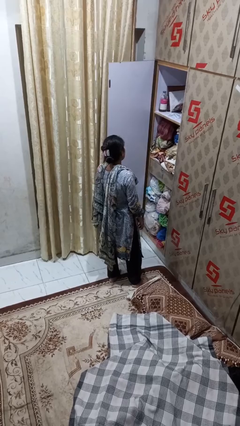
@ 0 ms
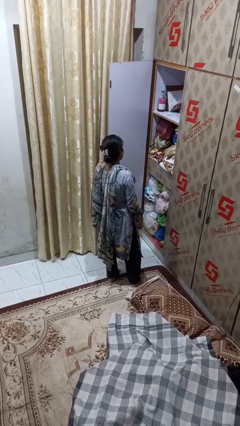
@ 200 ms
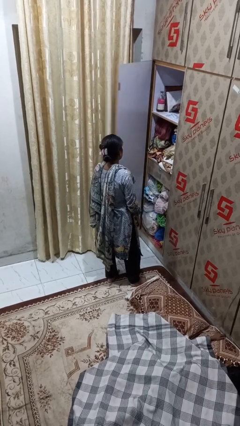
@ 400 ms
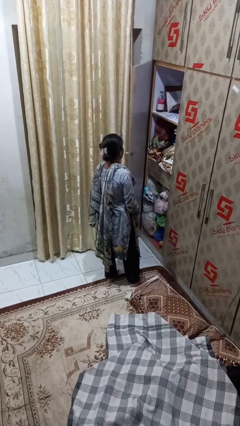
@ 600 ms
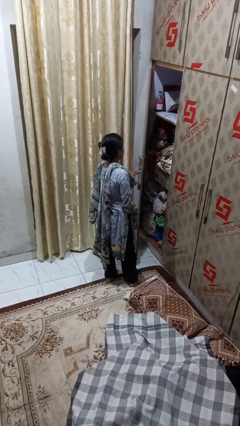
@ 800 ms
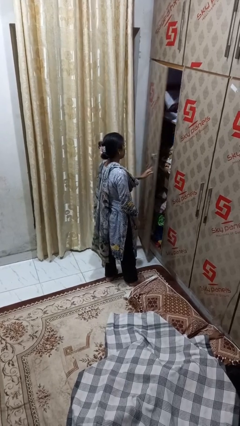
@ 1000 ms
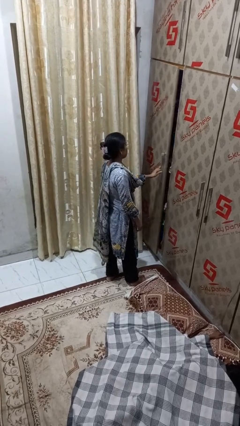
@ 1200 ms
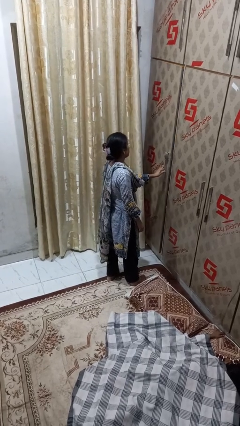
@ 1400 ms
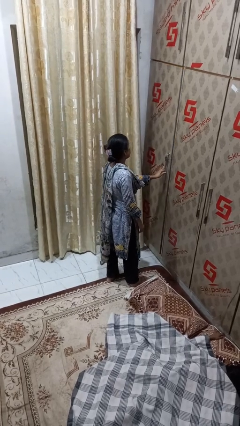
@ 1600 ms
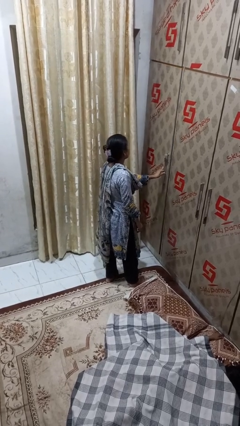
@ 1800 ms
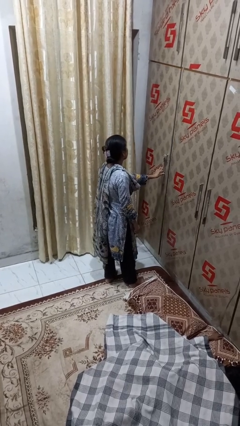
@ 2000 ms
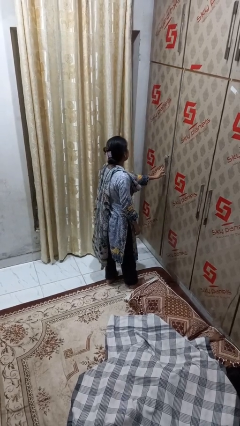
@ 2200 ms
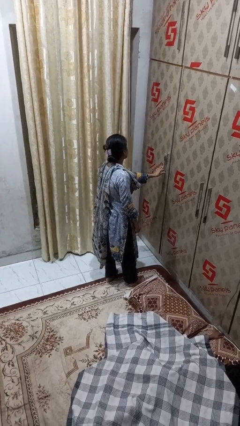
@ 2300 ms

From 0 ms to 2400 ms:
person closes closet door

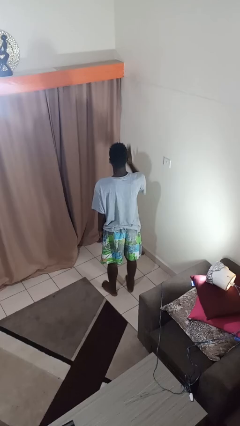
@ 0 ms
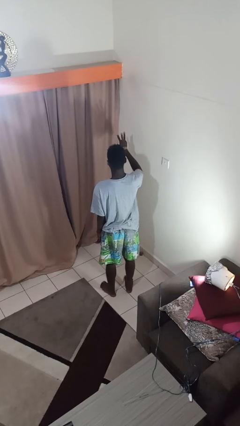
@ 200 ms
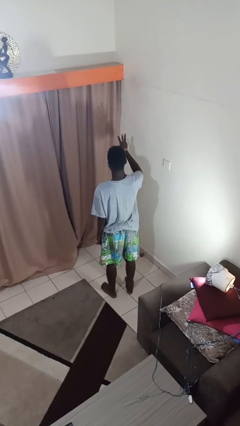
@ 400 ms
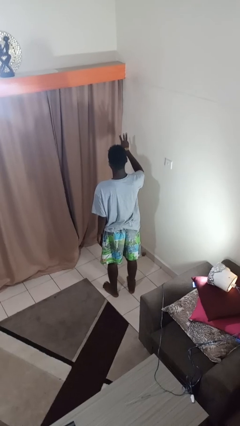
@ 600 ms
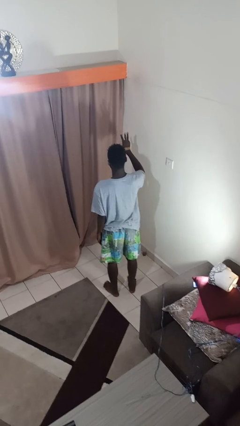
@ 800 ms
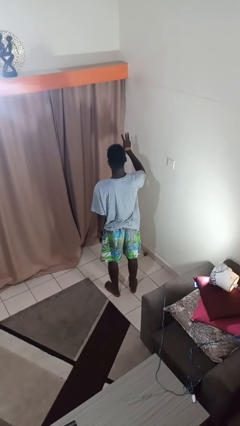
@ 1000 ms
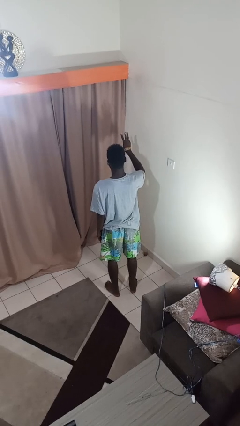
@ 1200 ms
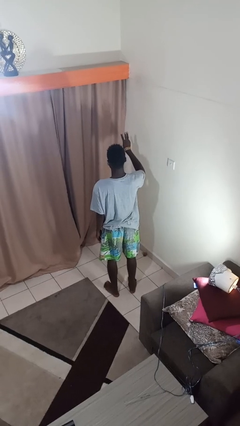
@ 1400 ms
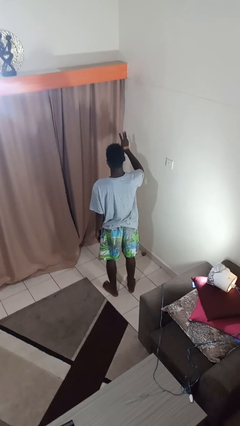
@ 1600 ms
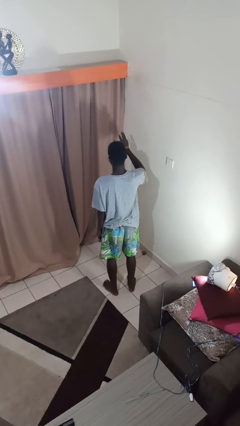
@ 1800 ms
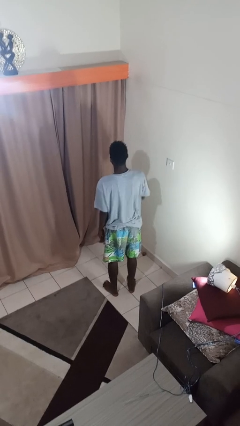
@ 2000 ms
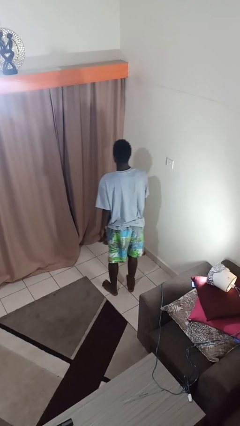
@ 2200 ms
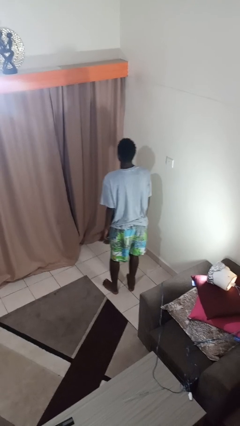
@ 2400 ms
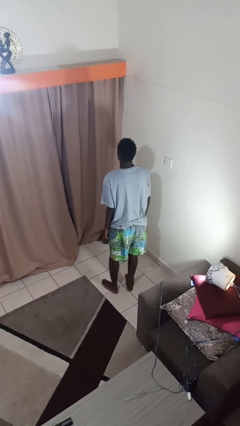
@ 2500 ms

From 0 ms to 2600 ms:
person gestures number three

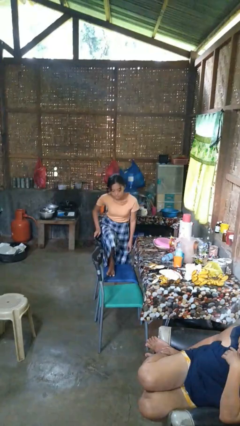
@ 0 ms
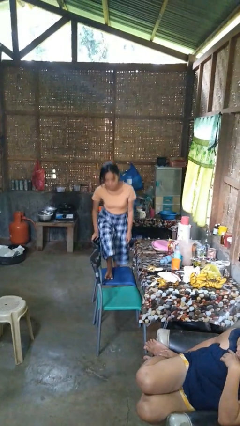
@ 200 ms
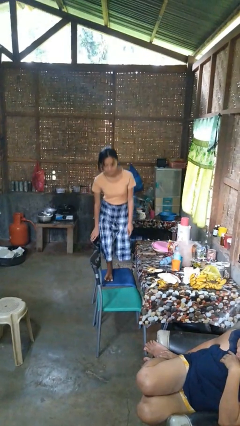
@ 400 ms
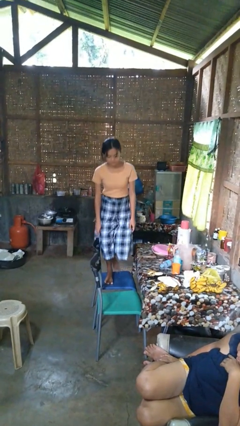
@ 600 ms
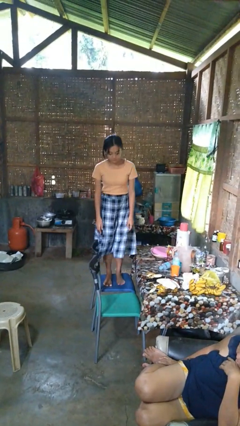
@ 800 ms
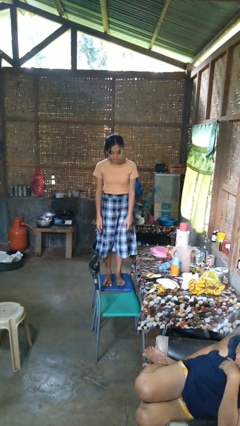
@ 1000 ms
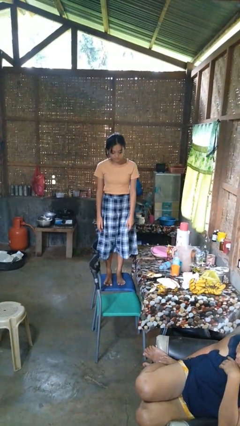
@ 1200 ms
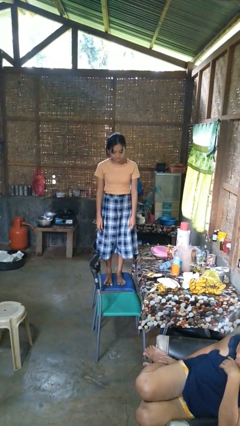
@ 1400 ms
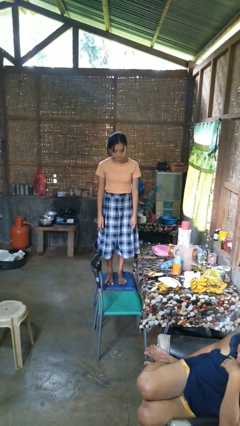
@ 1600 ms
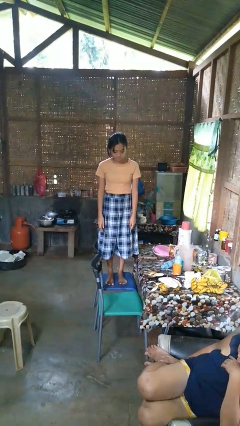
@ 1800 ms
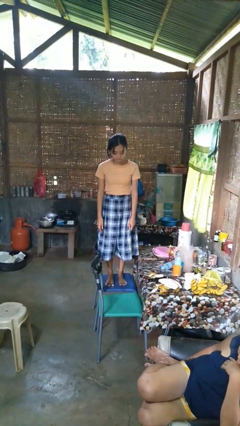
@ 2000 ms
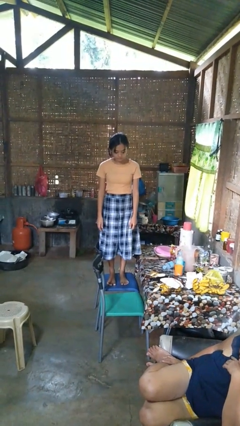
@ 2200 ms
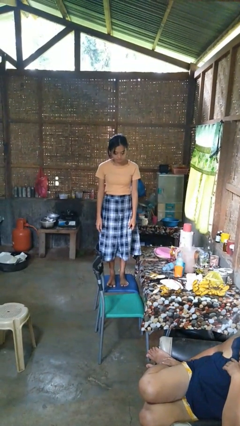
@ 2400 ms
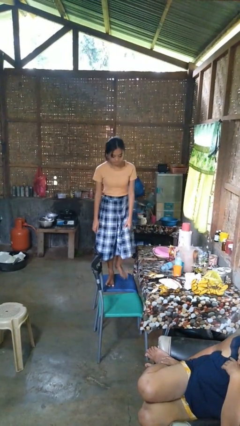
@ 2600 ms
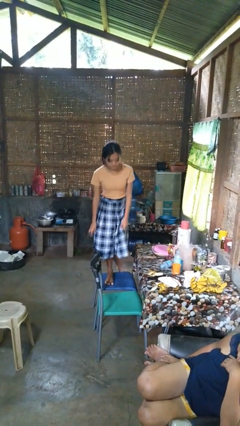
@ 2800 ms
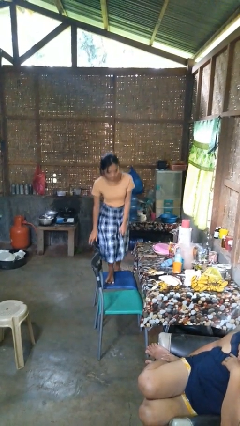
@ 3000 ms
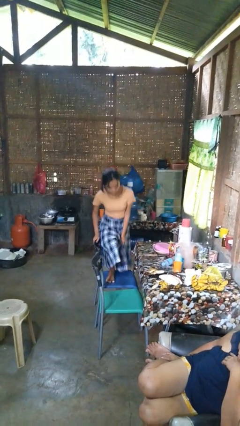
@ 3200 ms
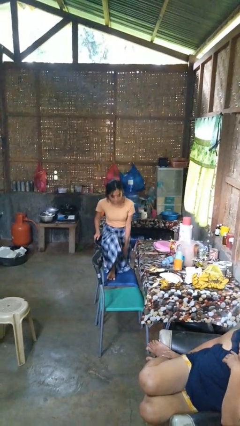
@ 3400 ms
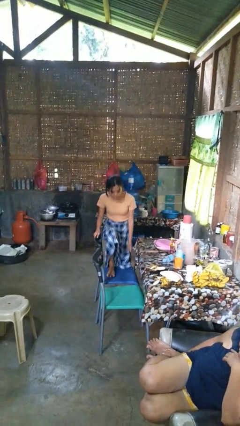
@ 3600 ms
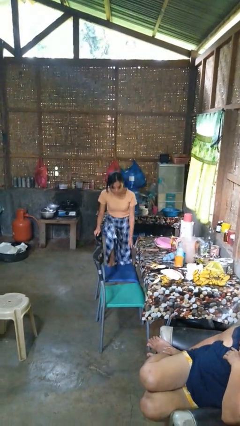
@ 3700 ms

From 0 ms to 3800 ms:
person climbs on couch

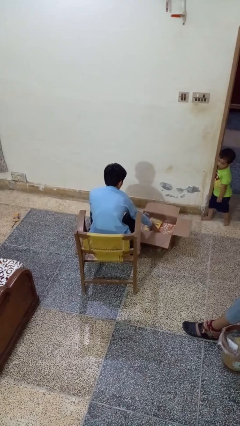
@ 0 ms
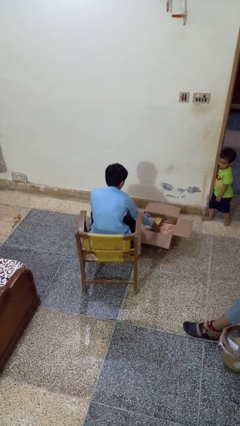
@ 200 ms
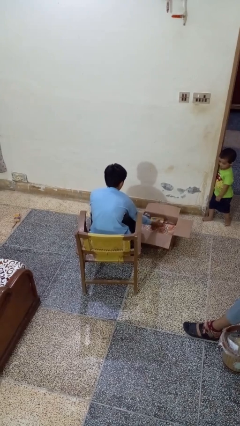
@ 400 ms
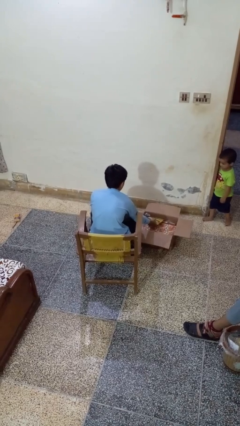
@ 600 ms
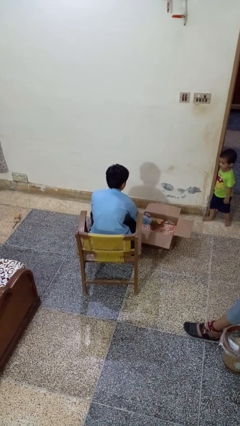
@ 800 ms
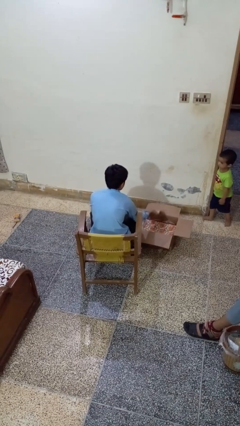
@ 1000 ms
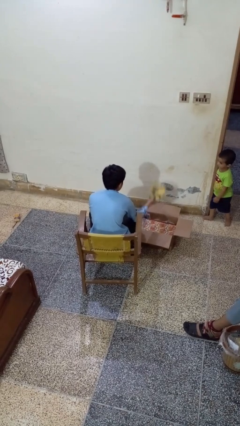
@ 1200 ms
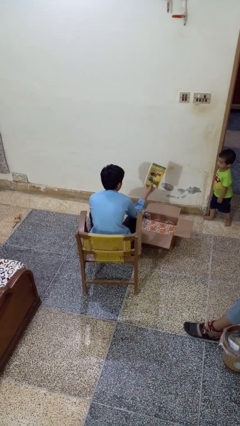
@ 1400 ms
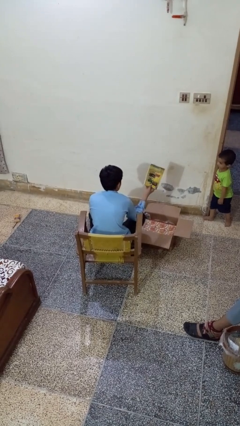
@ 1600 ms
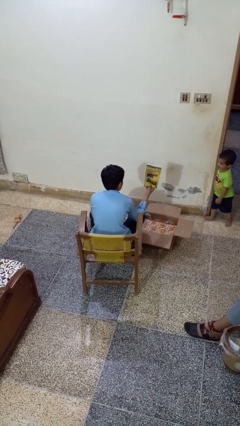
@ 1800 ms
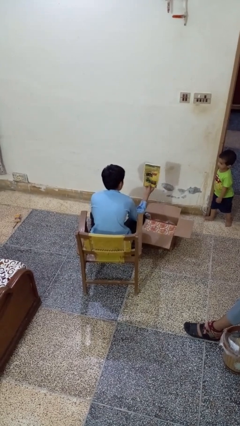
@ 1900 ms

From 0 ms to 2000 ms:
person takes object from box

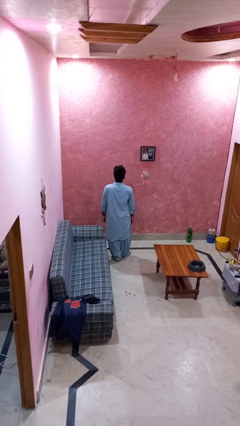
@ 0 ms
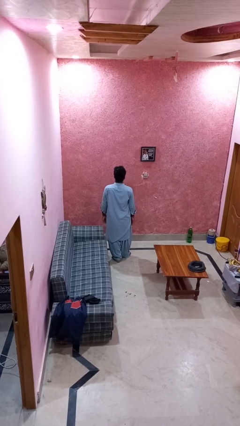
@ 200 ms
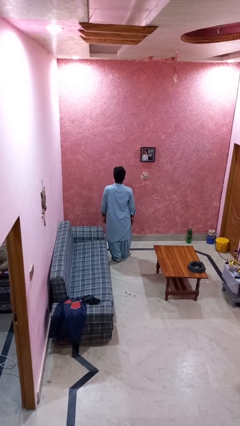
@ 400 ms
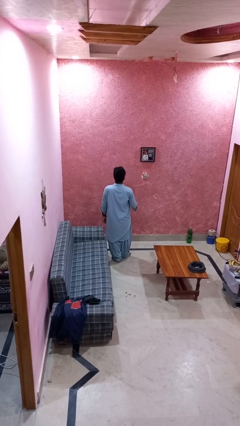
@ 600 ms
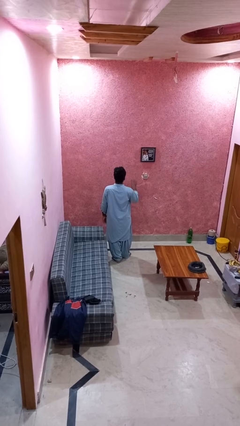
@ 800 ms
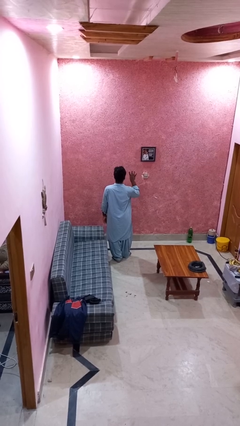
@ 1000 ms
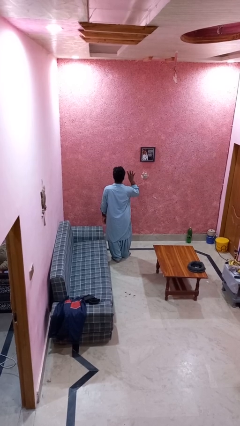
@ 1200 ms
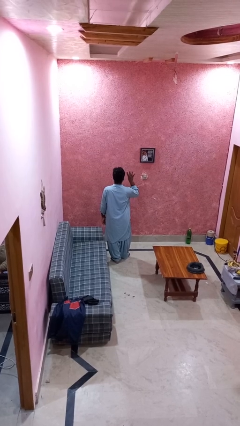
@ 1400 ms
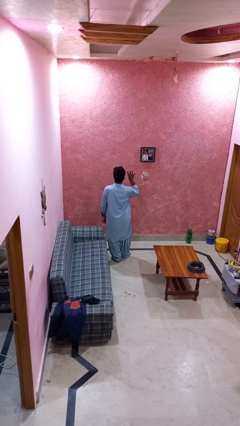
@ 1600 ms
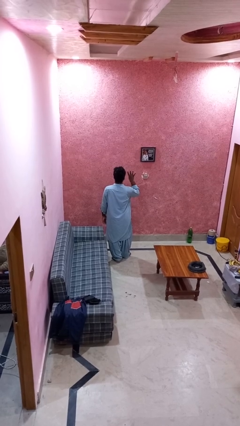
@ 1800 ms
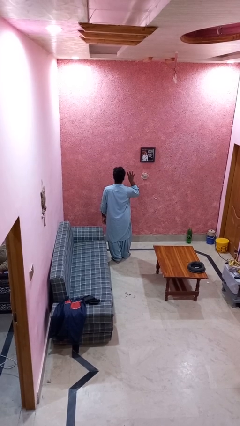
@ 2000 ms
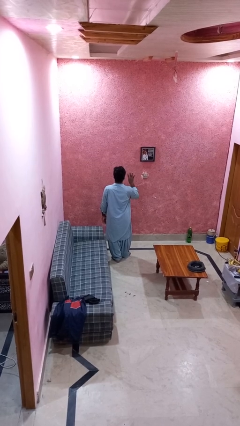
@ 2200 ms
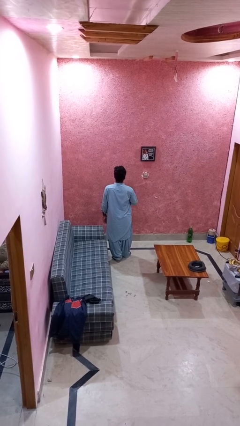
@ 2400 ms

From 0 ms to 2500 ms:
person gestures number four

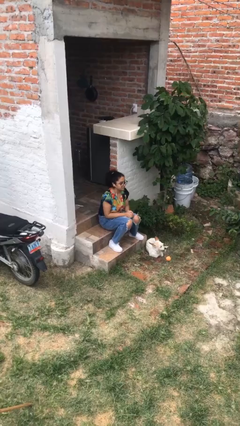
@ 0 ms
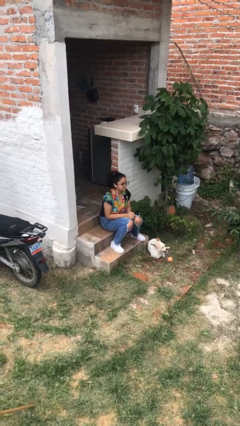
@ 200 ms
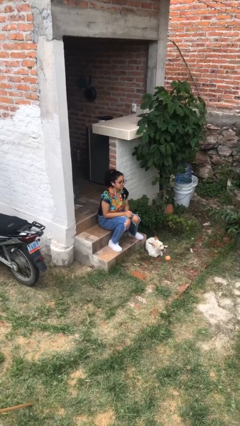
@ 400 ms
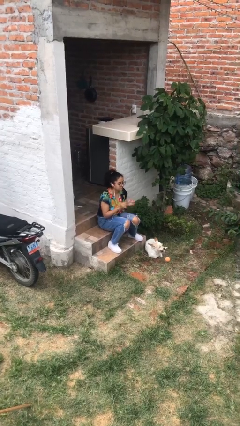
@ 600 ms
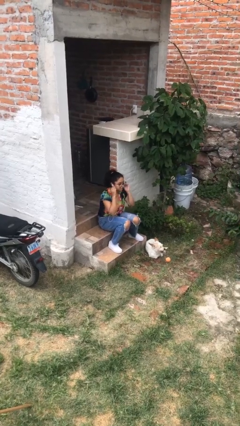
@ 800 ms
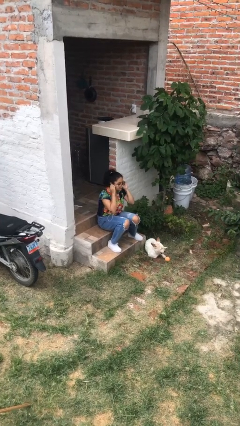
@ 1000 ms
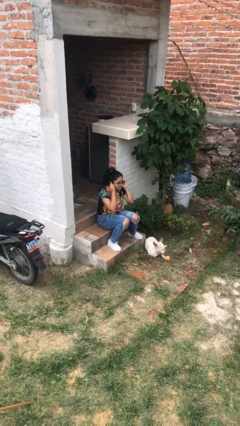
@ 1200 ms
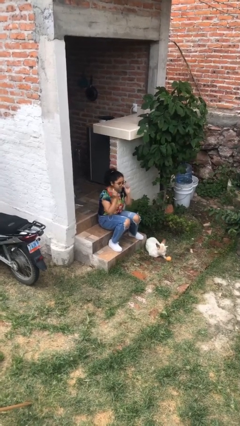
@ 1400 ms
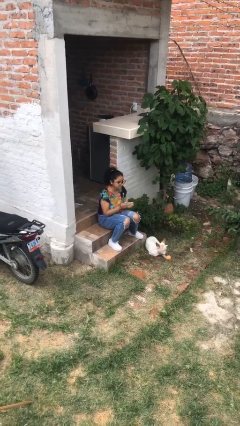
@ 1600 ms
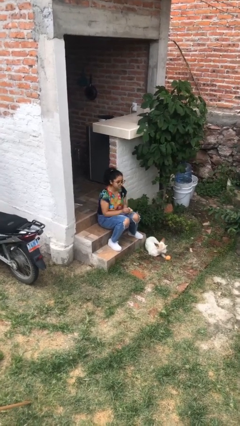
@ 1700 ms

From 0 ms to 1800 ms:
person takes off headphones

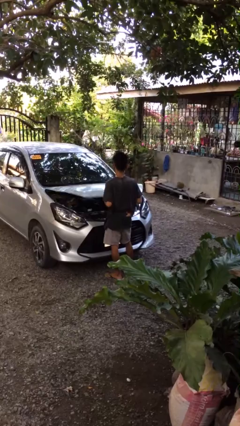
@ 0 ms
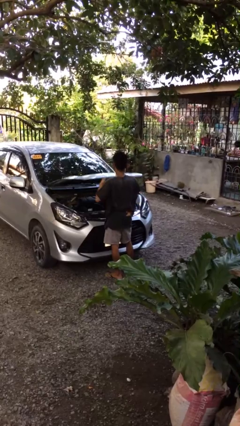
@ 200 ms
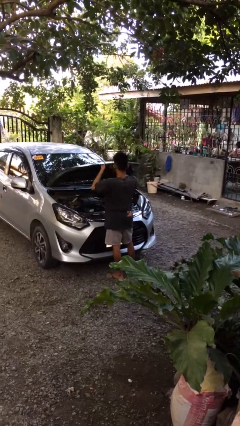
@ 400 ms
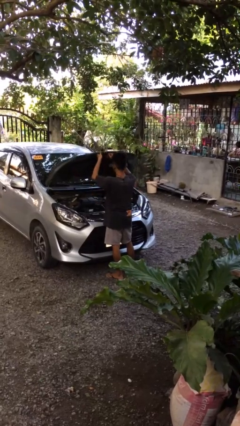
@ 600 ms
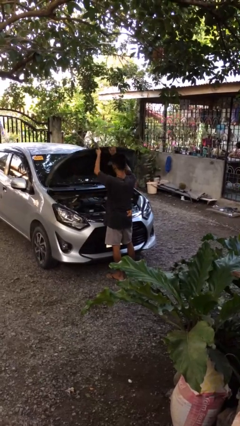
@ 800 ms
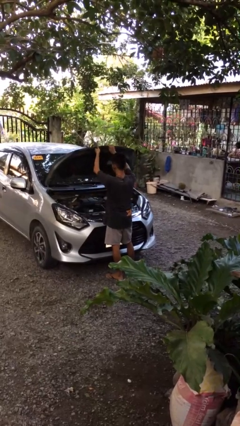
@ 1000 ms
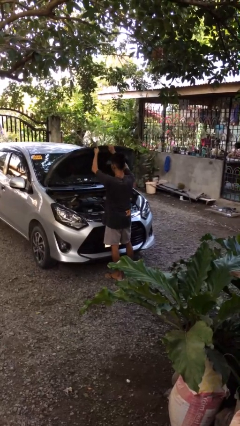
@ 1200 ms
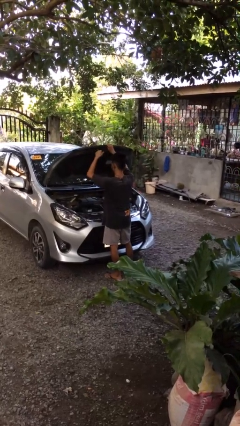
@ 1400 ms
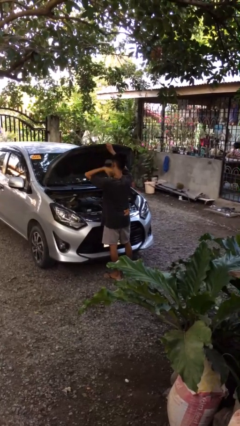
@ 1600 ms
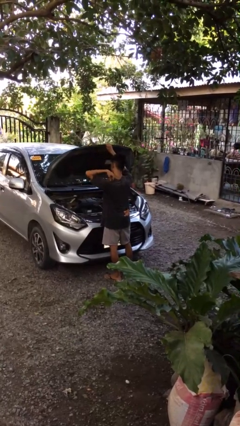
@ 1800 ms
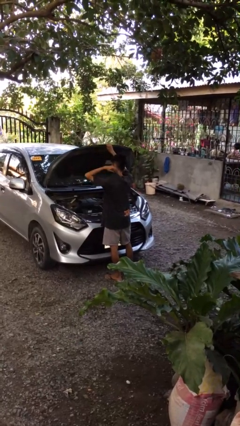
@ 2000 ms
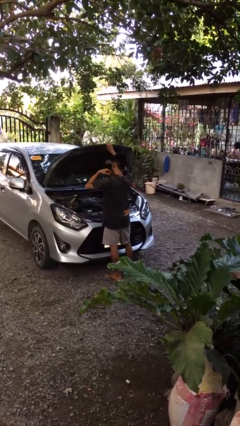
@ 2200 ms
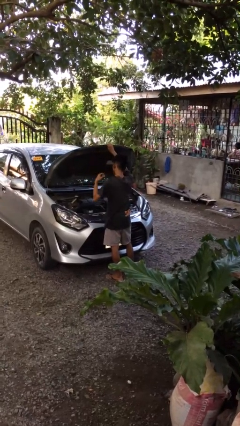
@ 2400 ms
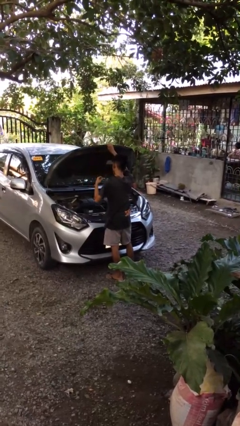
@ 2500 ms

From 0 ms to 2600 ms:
person opens car hood
